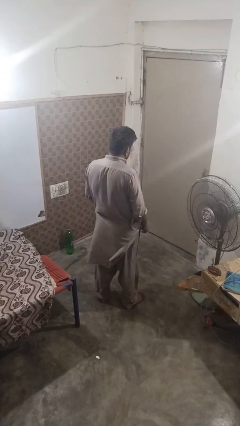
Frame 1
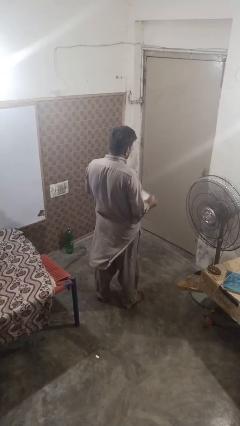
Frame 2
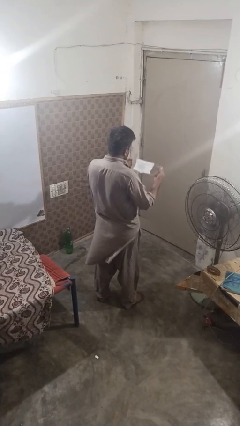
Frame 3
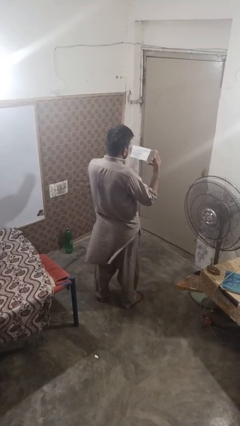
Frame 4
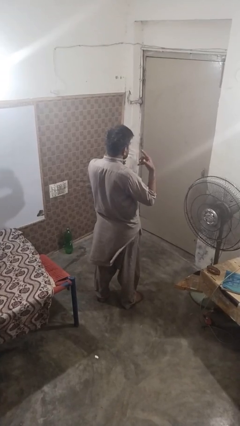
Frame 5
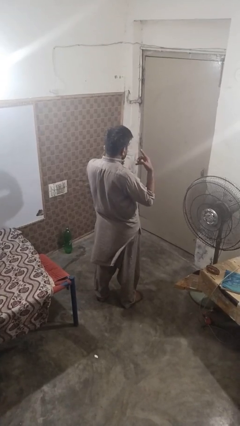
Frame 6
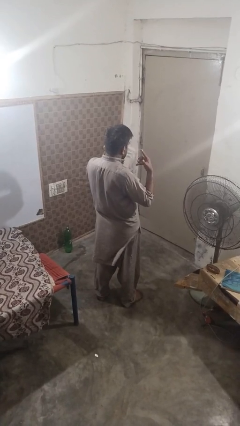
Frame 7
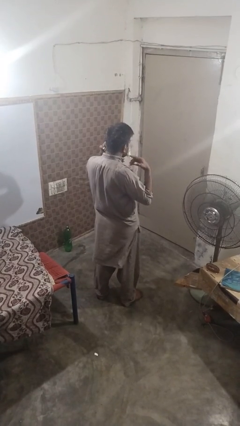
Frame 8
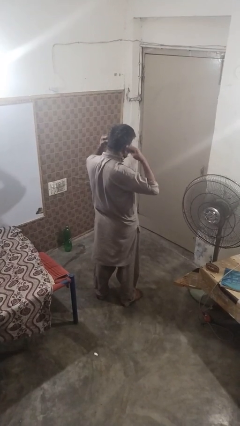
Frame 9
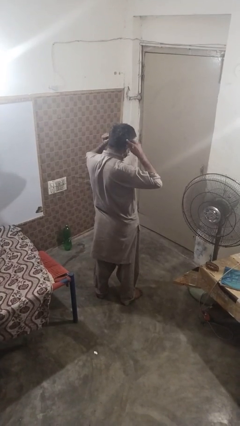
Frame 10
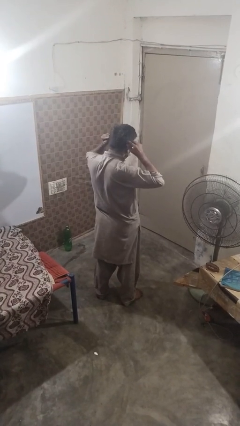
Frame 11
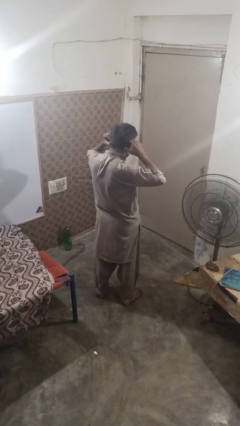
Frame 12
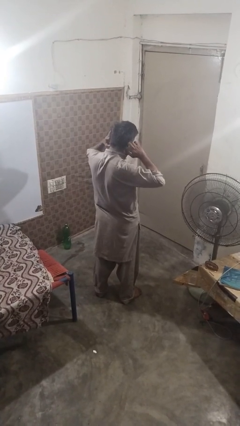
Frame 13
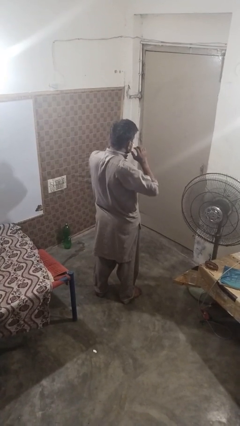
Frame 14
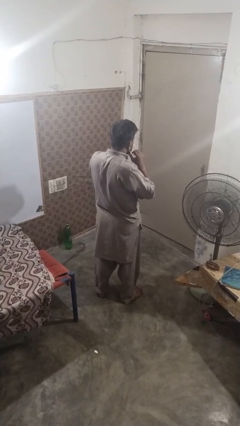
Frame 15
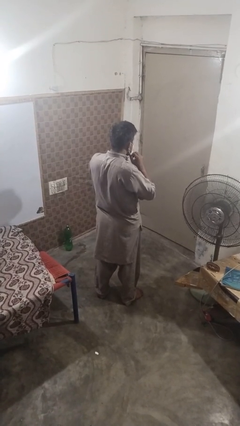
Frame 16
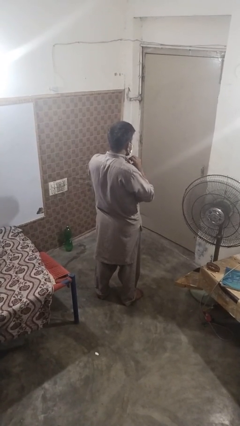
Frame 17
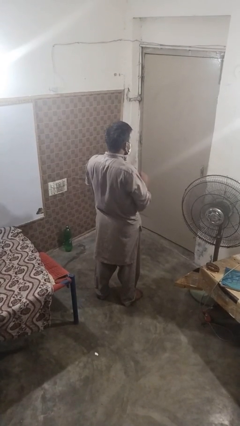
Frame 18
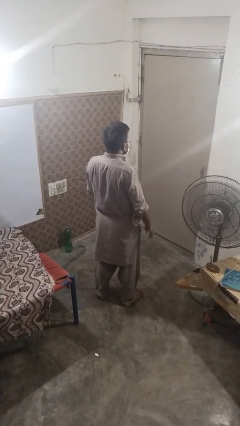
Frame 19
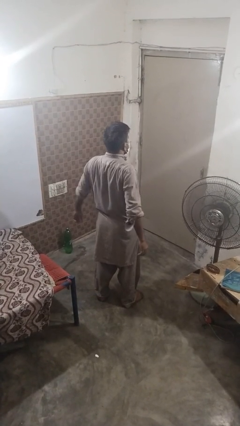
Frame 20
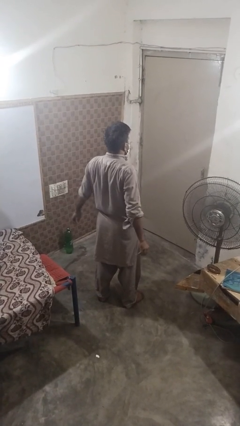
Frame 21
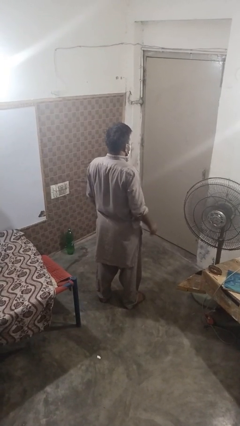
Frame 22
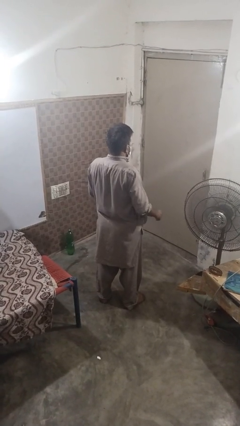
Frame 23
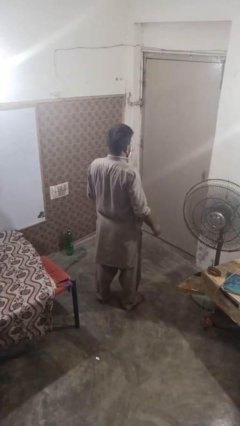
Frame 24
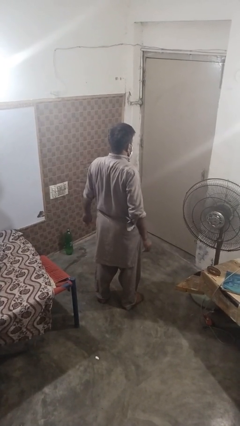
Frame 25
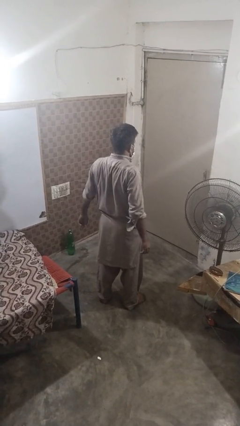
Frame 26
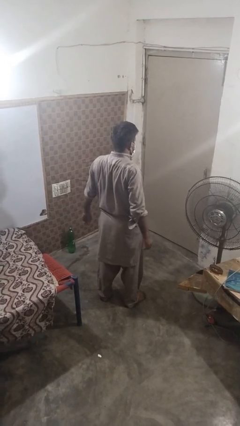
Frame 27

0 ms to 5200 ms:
person puts on facemask

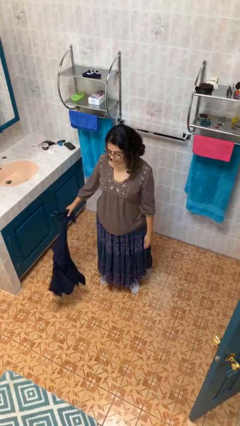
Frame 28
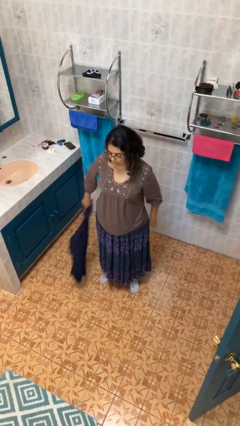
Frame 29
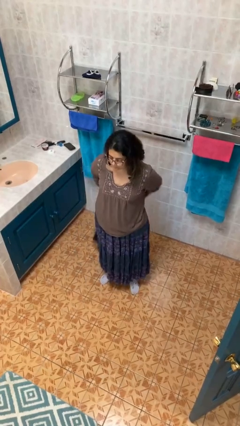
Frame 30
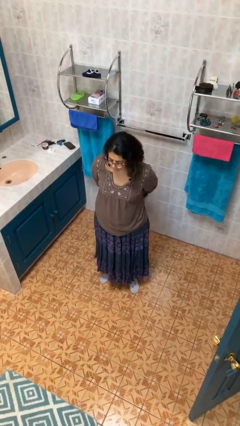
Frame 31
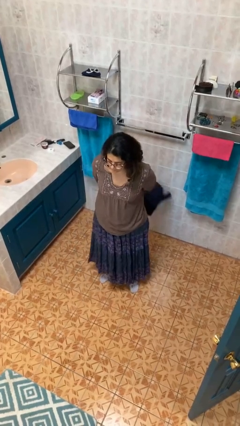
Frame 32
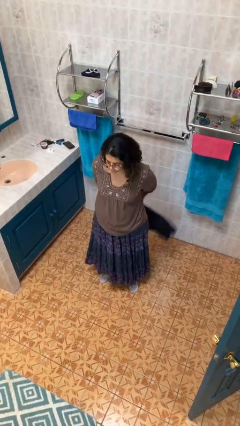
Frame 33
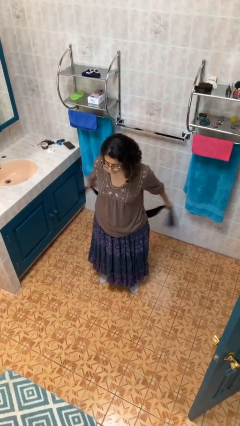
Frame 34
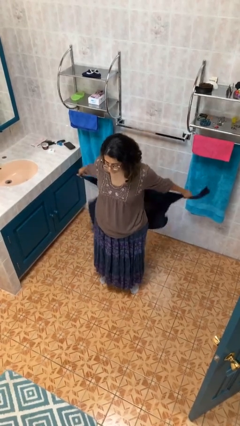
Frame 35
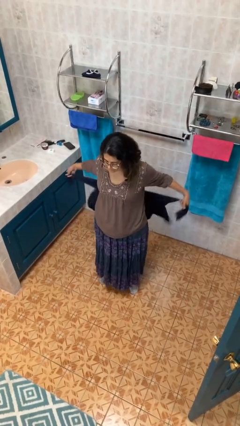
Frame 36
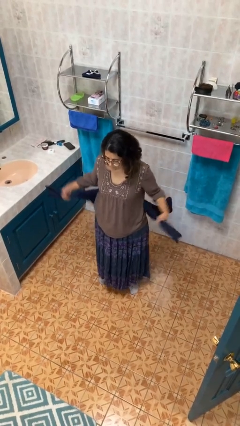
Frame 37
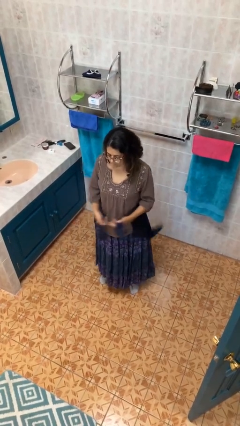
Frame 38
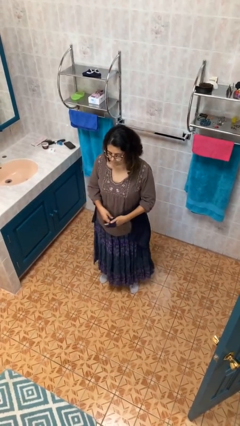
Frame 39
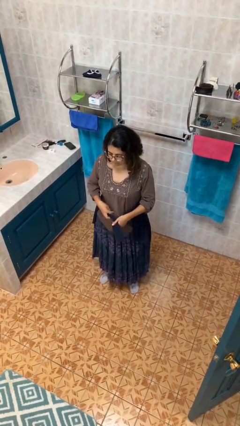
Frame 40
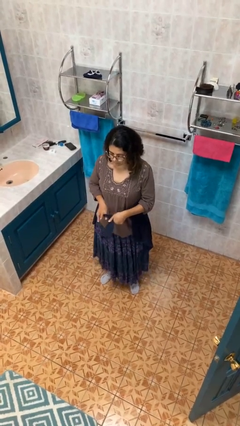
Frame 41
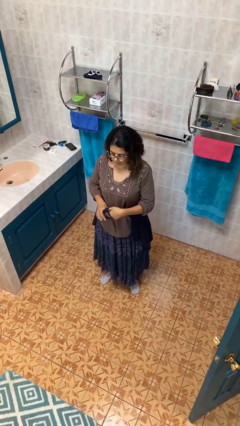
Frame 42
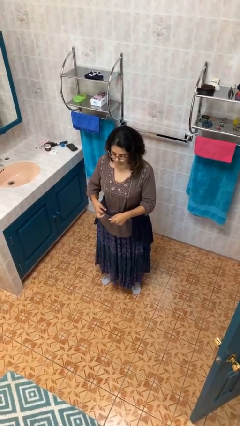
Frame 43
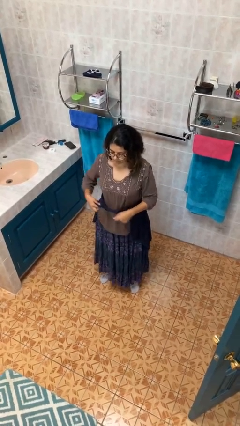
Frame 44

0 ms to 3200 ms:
person ties jacket around waist

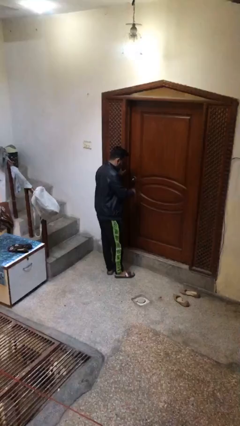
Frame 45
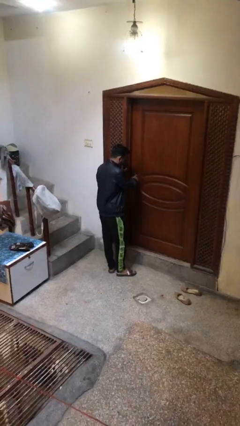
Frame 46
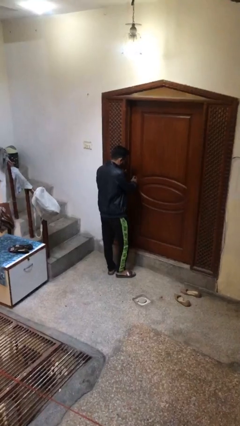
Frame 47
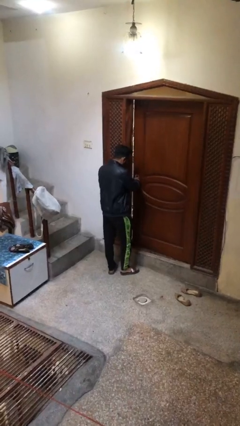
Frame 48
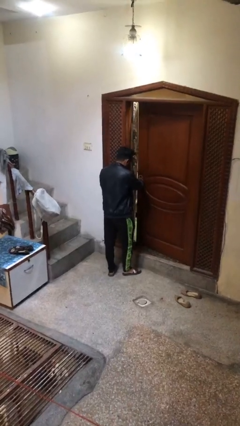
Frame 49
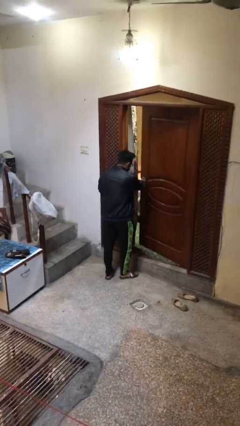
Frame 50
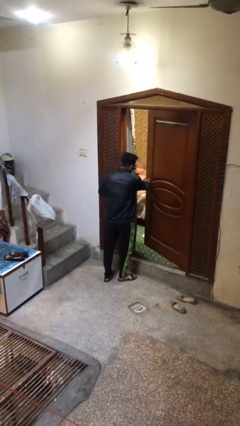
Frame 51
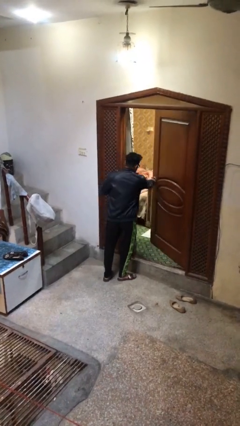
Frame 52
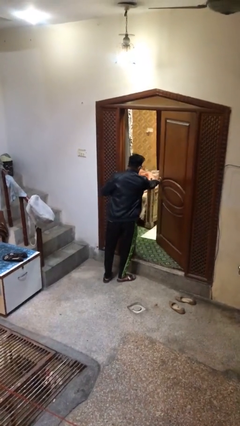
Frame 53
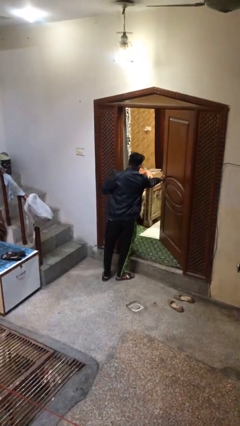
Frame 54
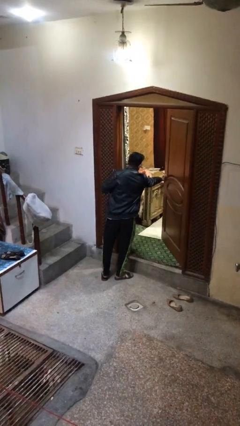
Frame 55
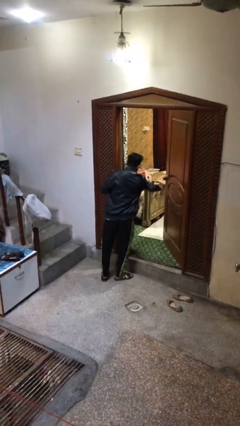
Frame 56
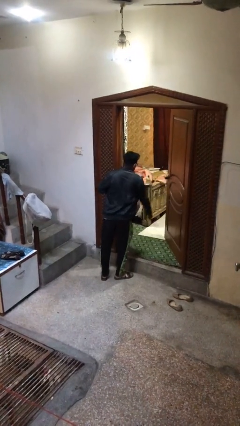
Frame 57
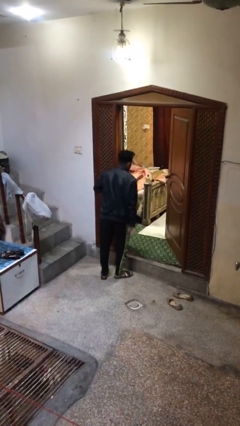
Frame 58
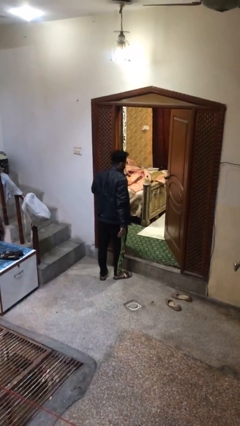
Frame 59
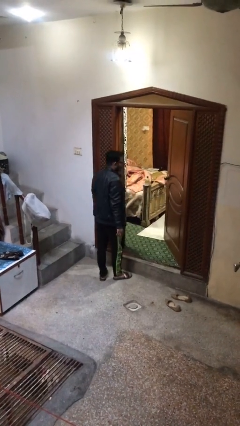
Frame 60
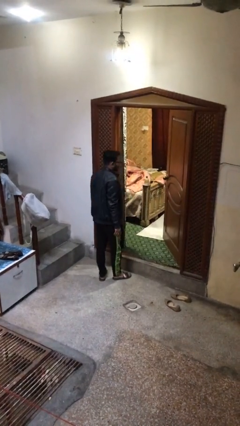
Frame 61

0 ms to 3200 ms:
person opens facility door

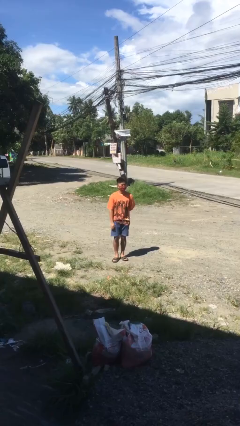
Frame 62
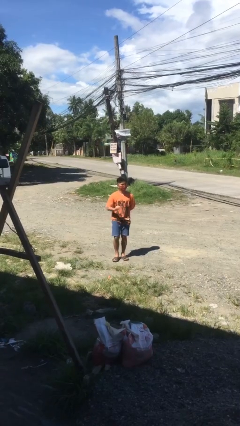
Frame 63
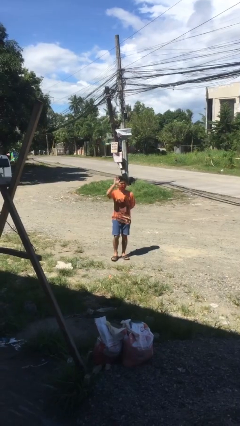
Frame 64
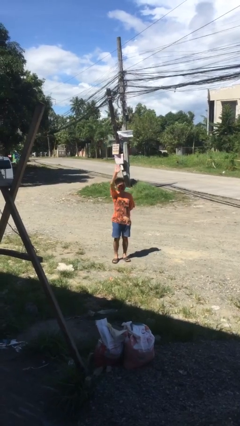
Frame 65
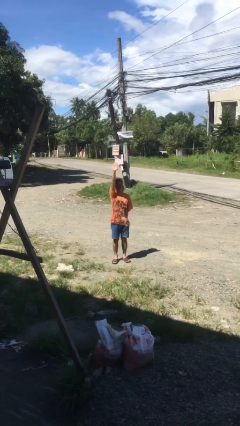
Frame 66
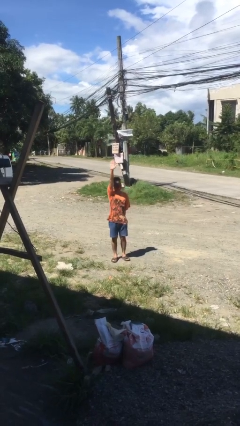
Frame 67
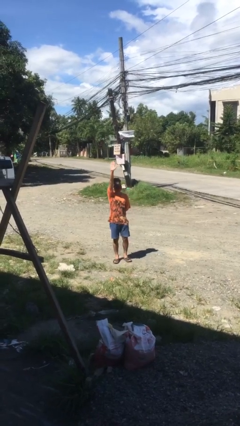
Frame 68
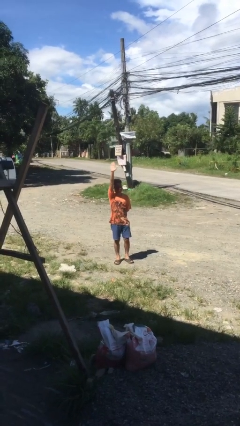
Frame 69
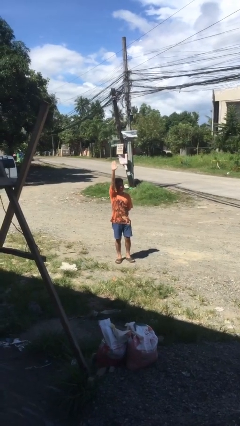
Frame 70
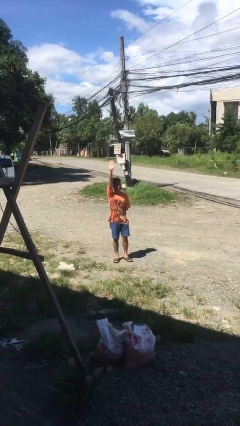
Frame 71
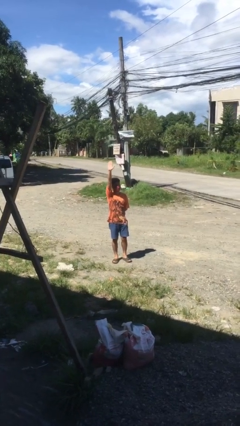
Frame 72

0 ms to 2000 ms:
person gestures raise hand

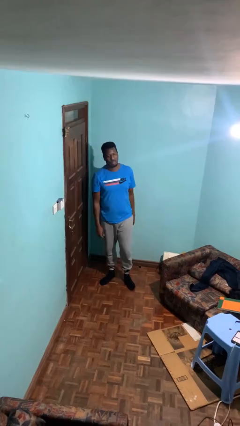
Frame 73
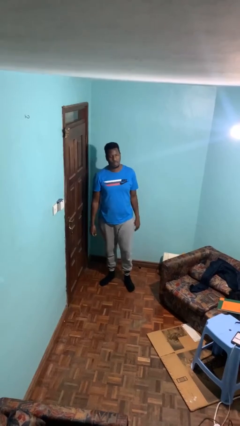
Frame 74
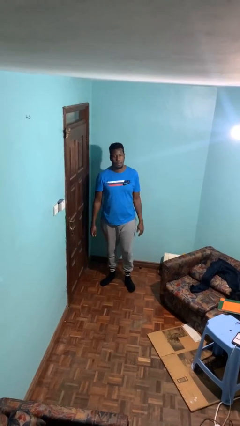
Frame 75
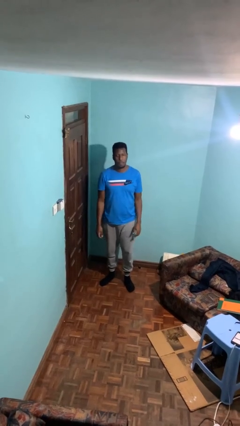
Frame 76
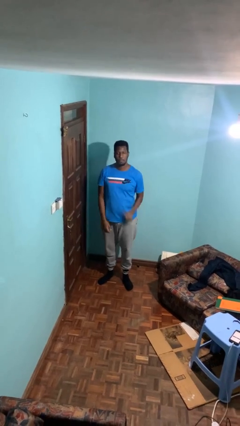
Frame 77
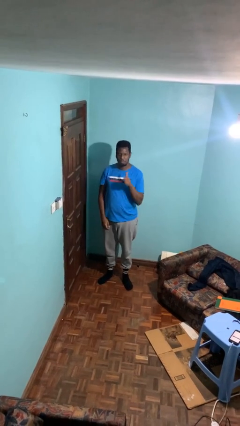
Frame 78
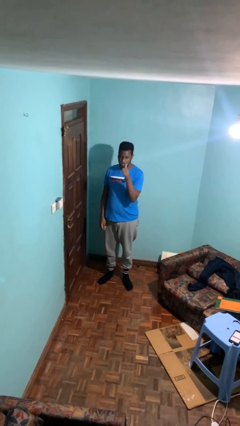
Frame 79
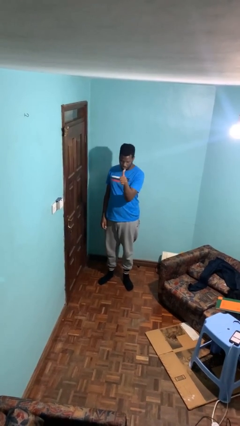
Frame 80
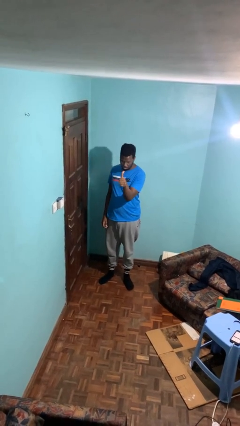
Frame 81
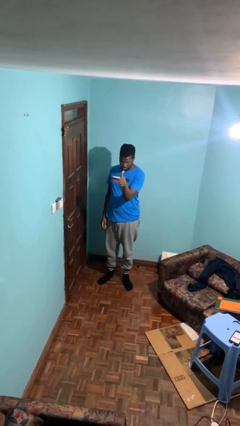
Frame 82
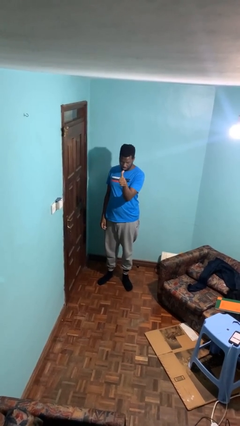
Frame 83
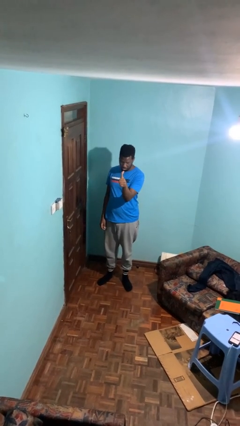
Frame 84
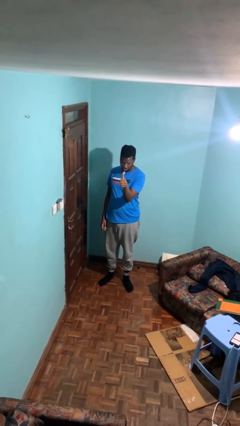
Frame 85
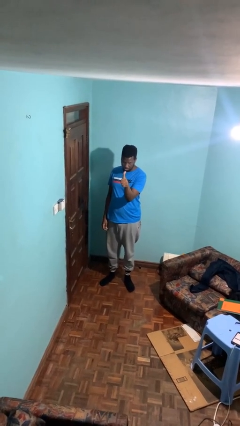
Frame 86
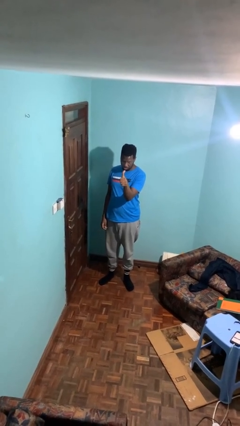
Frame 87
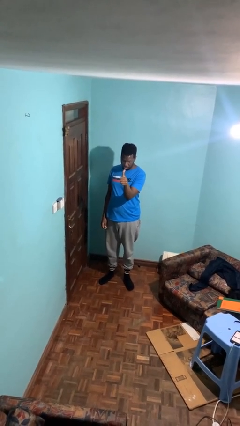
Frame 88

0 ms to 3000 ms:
person gestures thumbs up

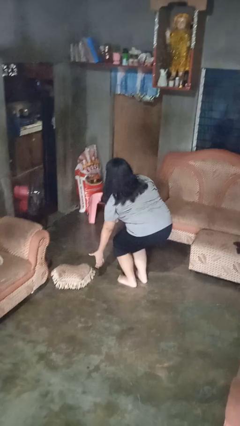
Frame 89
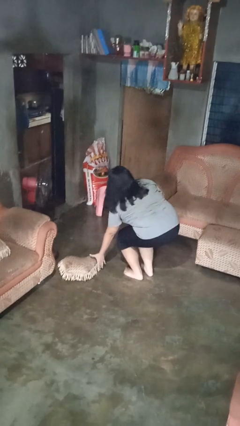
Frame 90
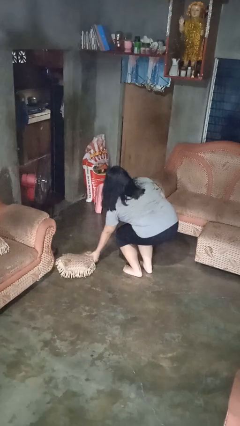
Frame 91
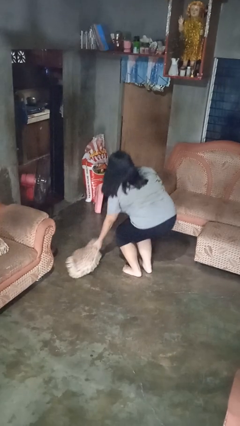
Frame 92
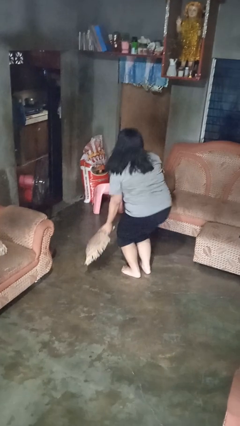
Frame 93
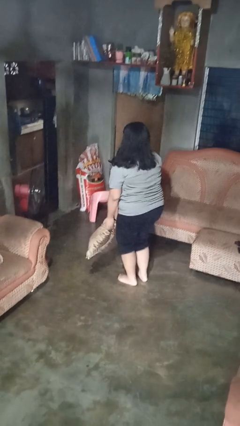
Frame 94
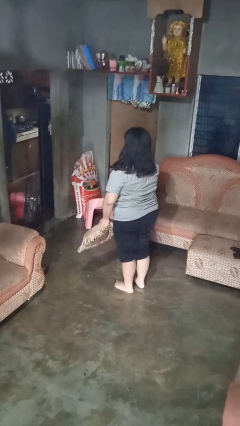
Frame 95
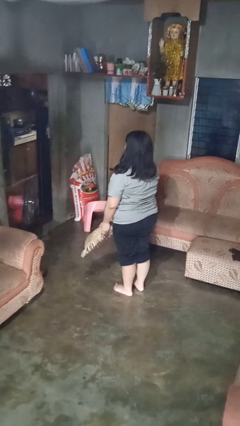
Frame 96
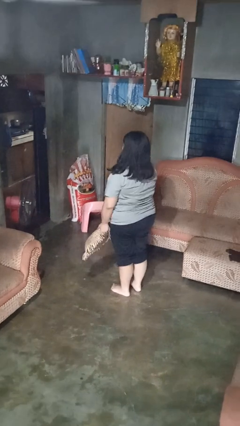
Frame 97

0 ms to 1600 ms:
person picks up object from floor
